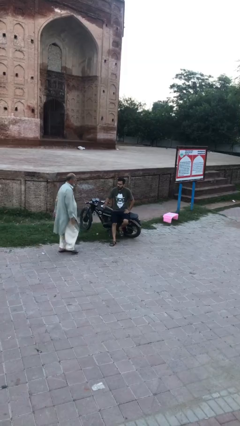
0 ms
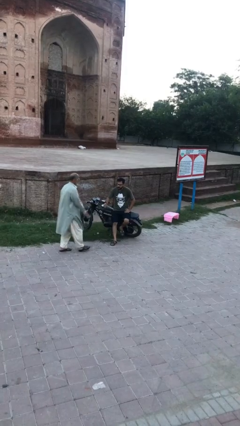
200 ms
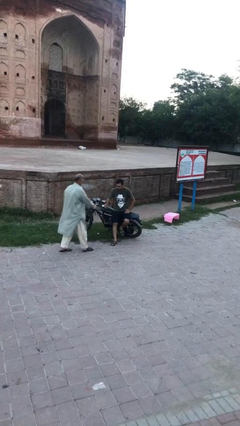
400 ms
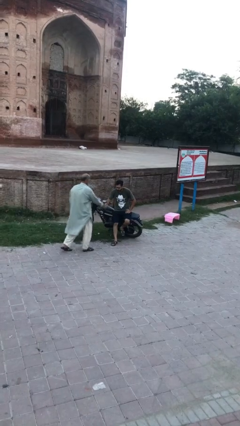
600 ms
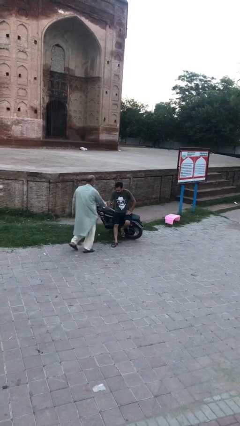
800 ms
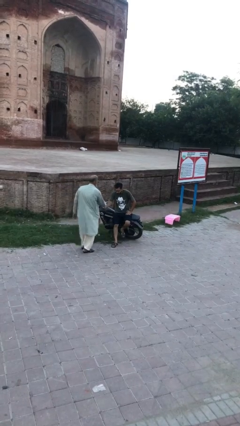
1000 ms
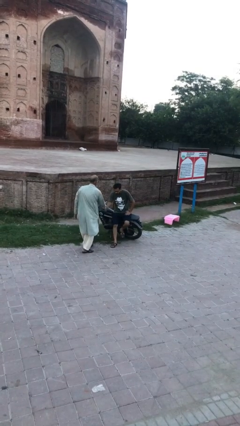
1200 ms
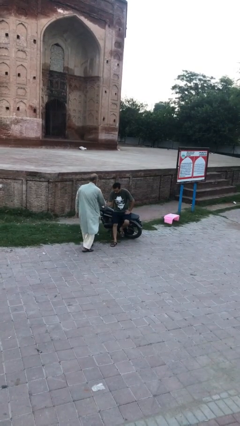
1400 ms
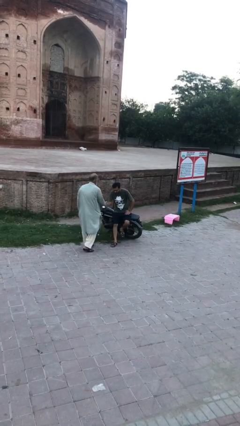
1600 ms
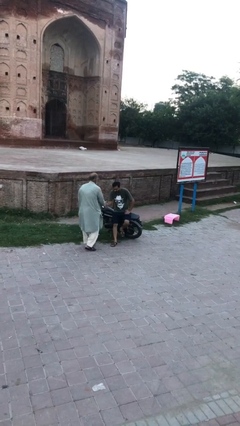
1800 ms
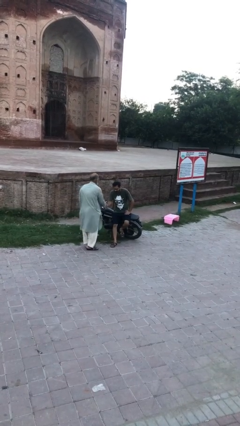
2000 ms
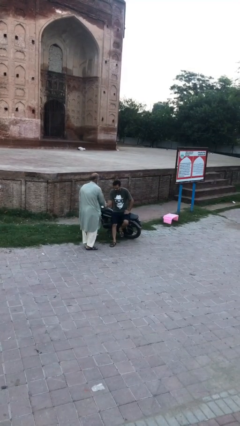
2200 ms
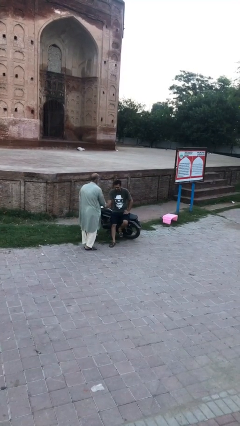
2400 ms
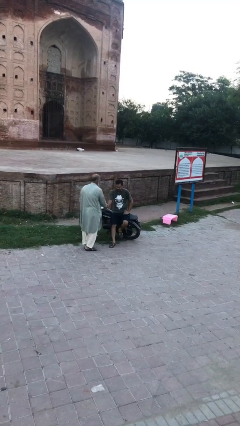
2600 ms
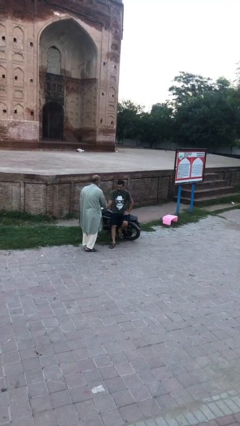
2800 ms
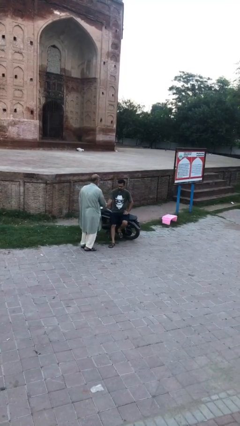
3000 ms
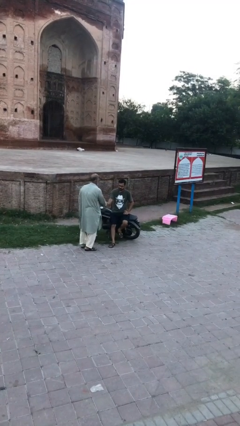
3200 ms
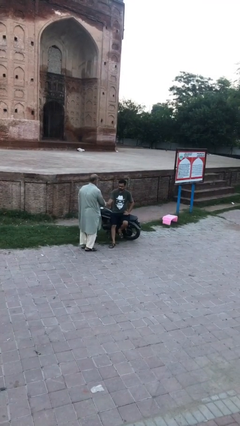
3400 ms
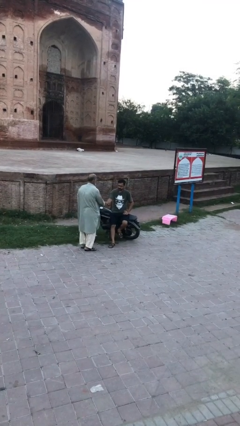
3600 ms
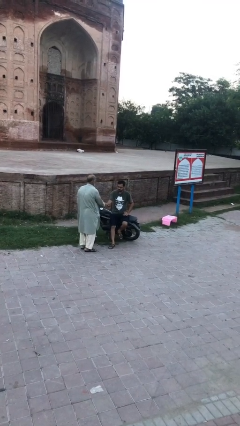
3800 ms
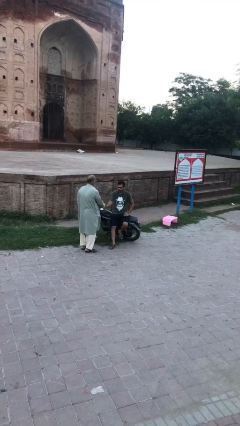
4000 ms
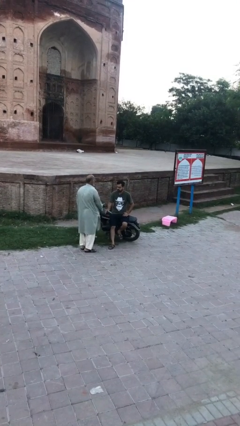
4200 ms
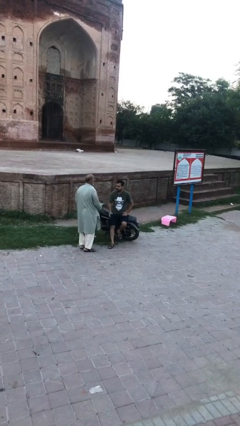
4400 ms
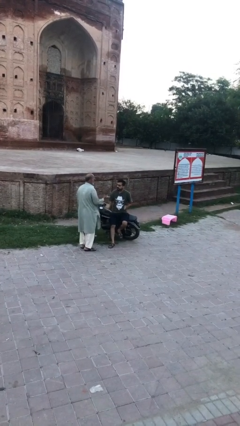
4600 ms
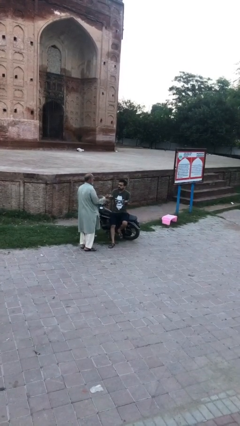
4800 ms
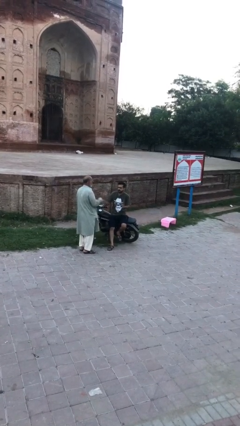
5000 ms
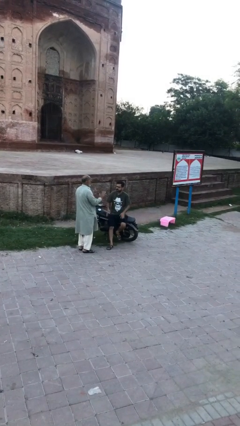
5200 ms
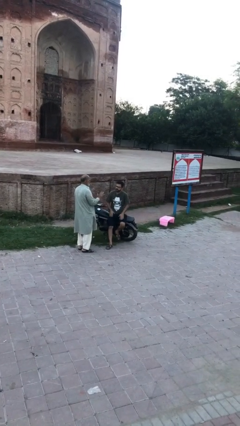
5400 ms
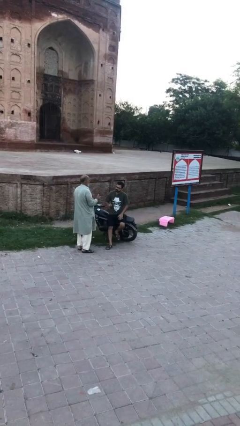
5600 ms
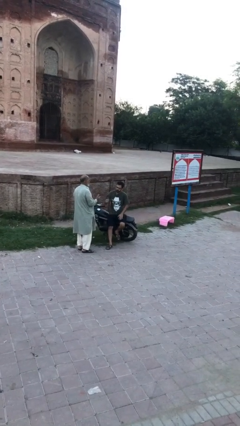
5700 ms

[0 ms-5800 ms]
person shakes hand

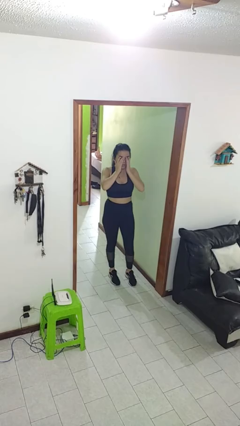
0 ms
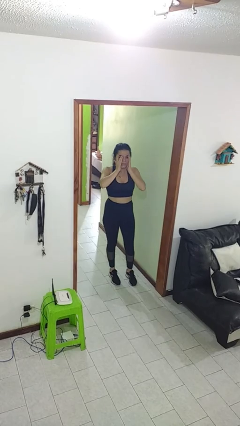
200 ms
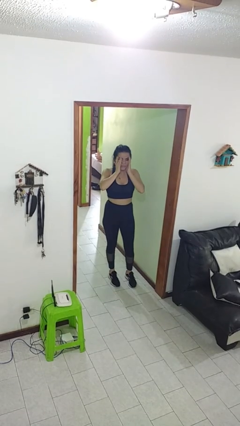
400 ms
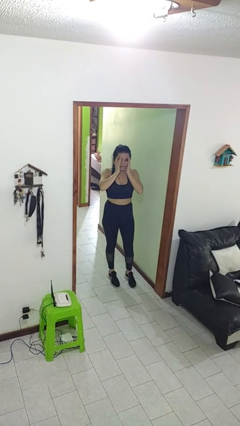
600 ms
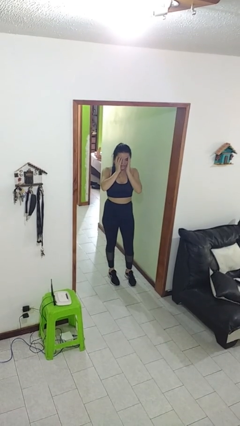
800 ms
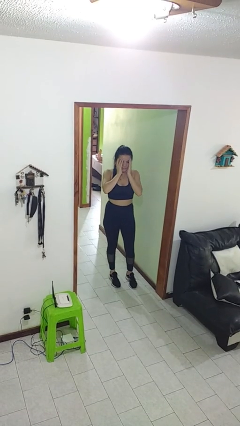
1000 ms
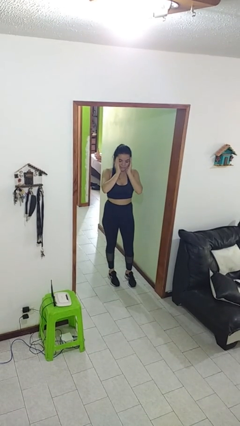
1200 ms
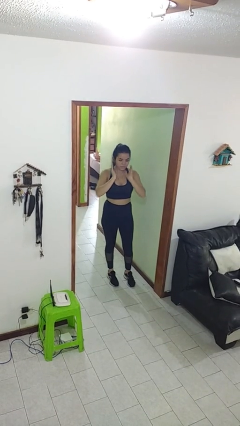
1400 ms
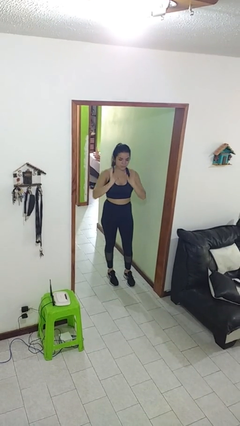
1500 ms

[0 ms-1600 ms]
person covers face with hands

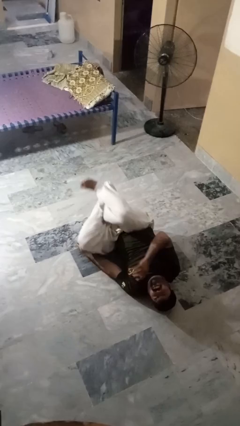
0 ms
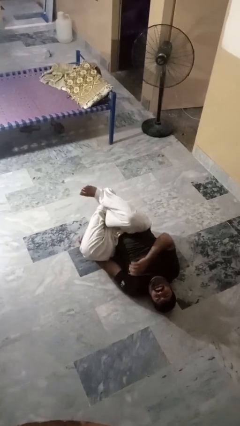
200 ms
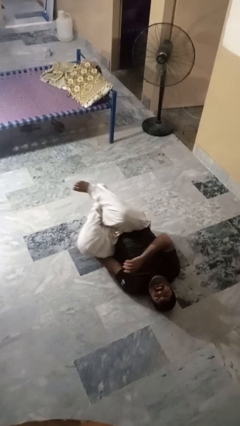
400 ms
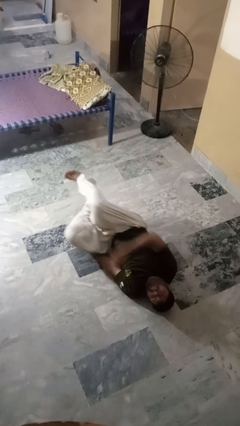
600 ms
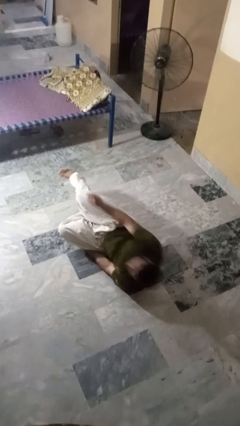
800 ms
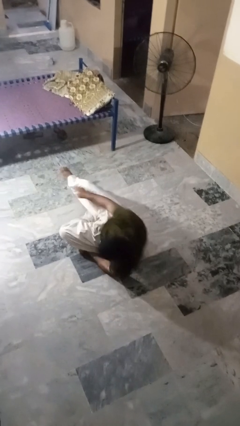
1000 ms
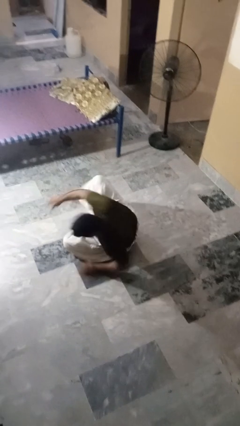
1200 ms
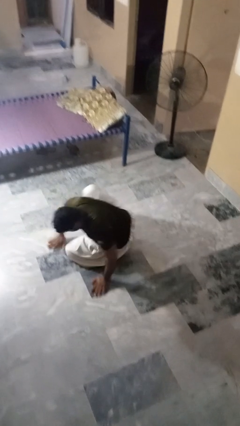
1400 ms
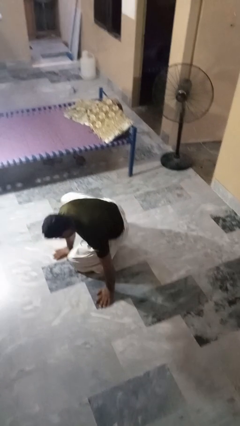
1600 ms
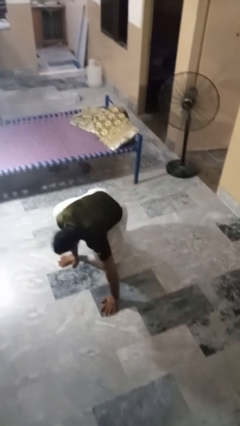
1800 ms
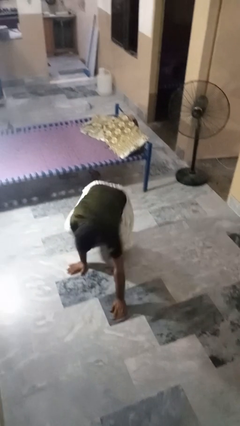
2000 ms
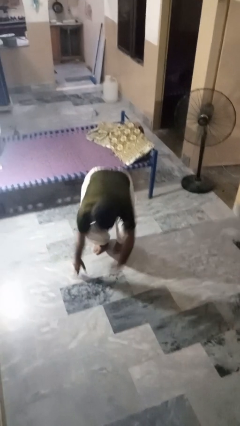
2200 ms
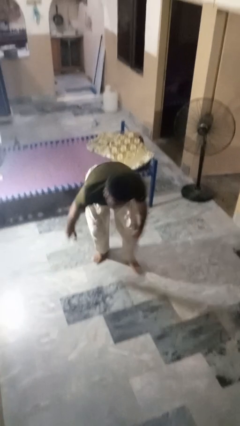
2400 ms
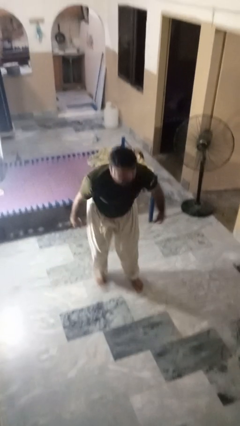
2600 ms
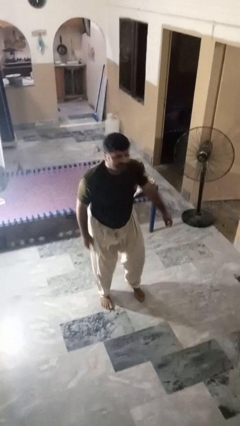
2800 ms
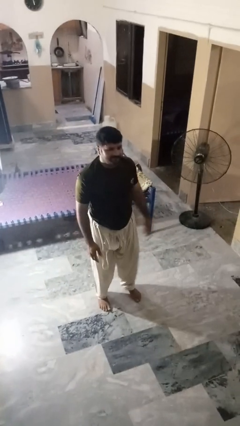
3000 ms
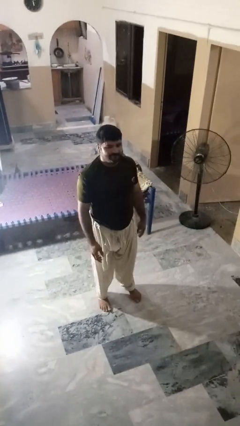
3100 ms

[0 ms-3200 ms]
person stands up from floor

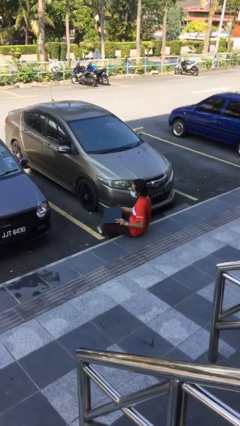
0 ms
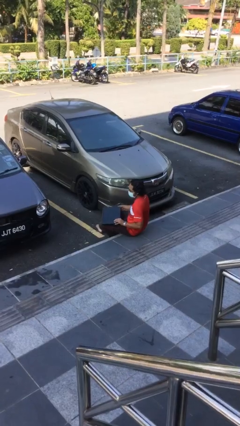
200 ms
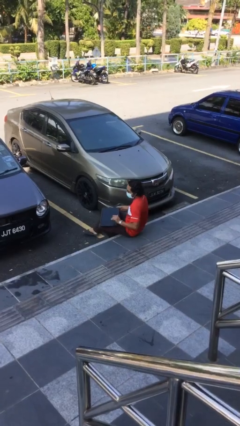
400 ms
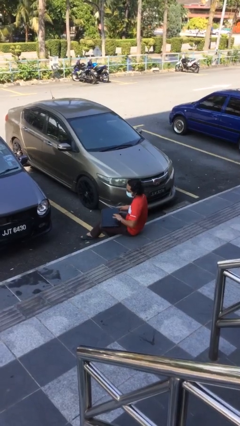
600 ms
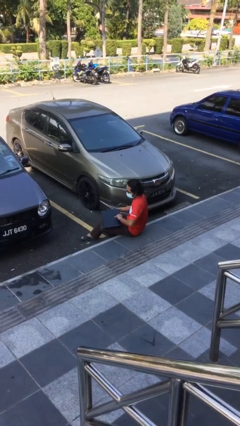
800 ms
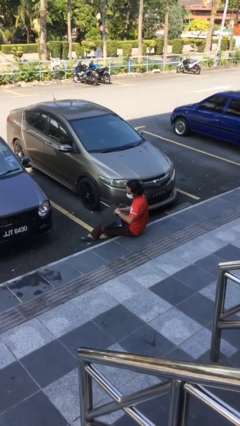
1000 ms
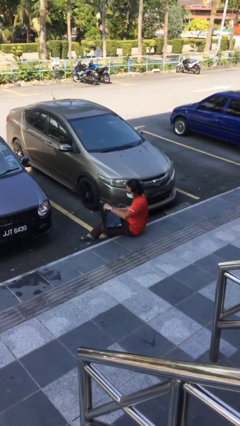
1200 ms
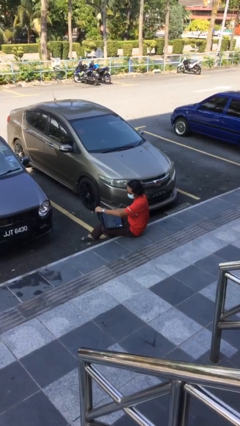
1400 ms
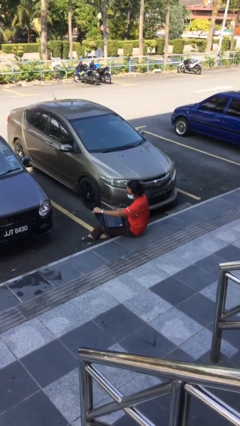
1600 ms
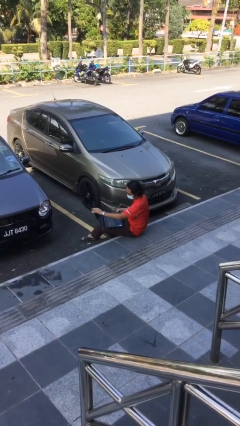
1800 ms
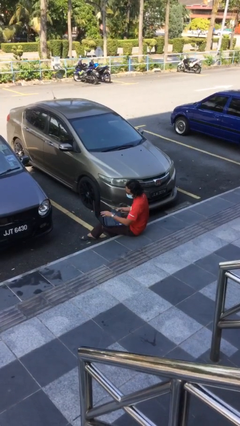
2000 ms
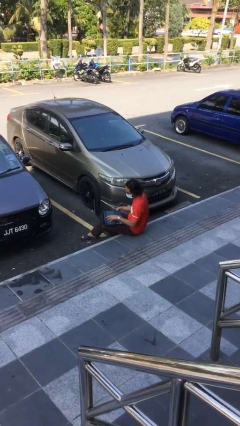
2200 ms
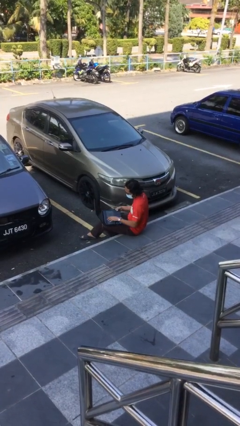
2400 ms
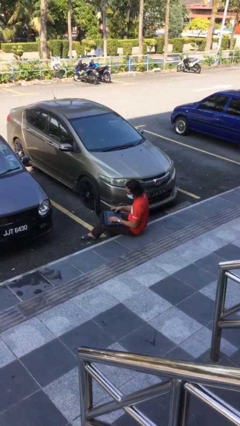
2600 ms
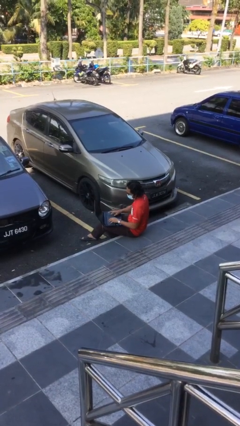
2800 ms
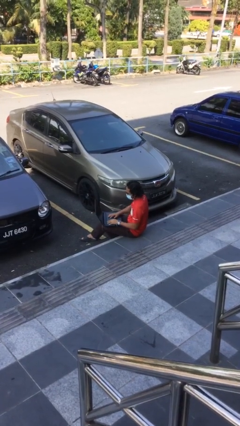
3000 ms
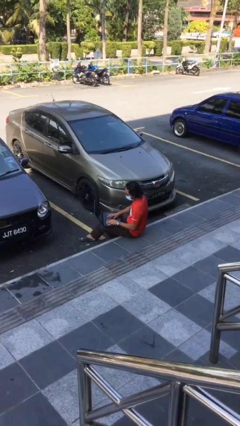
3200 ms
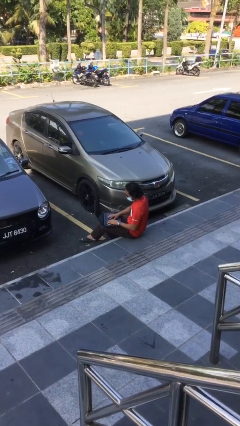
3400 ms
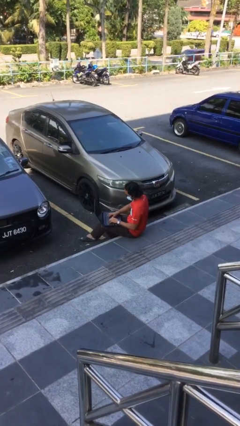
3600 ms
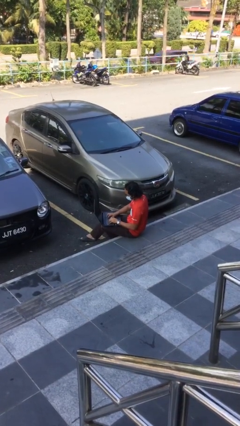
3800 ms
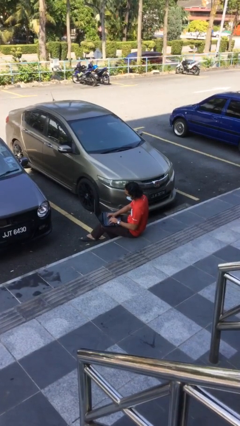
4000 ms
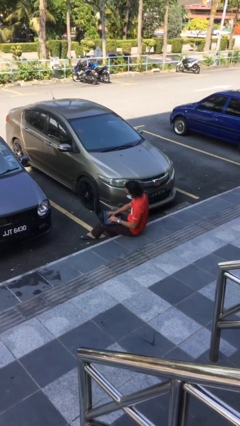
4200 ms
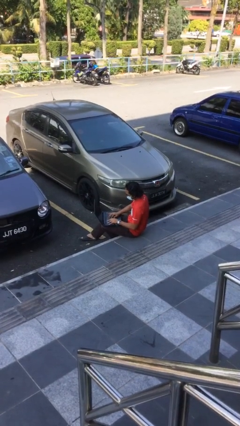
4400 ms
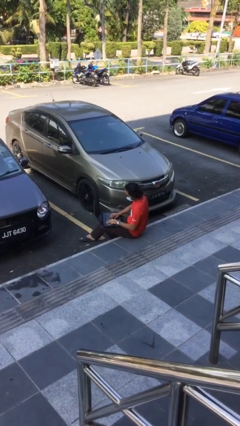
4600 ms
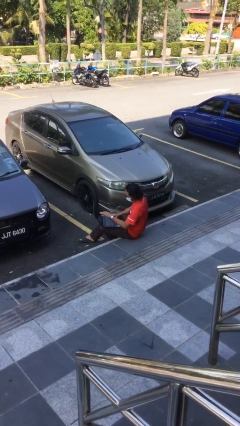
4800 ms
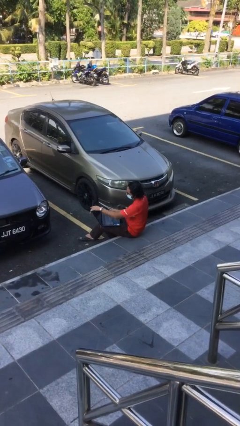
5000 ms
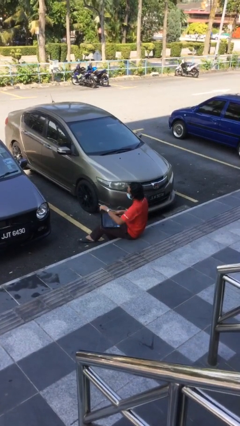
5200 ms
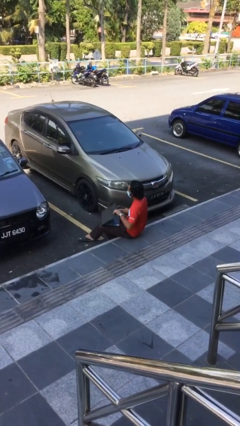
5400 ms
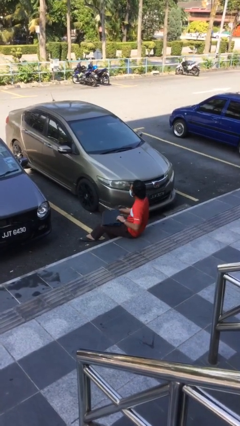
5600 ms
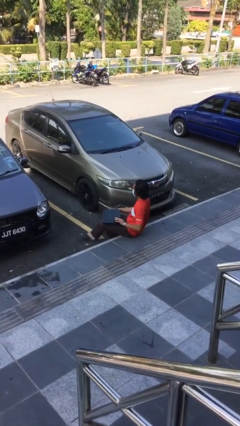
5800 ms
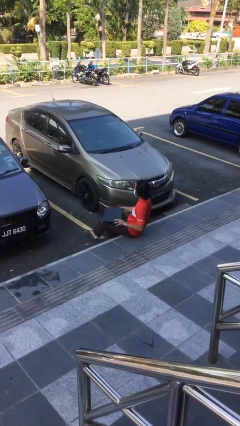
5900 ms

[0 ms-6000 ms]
person interacts with laptop

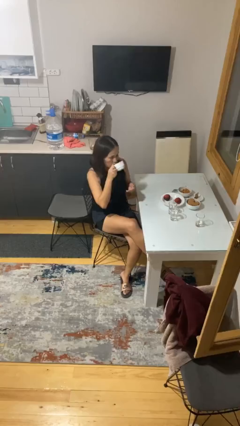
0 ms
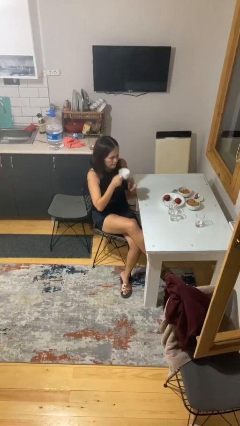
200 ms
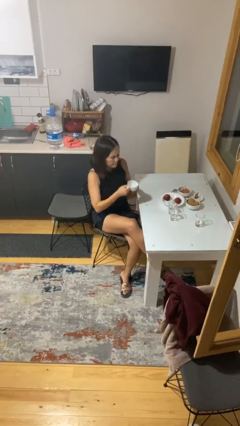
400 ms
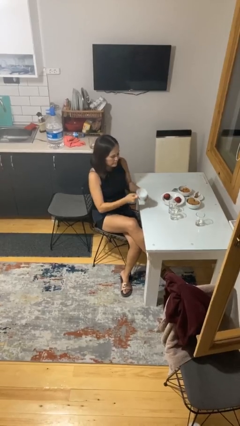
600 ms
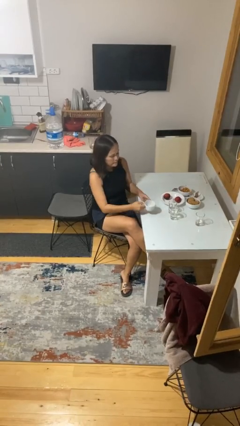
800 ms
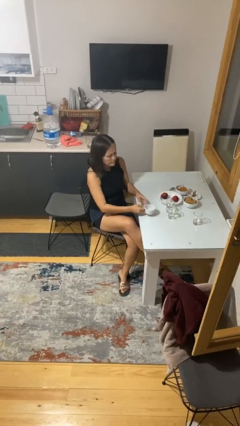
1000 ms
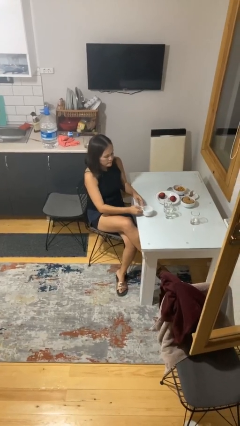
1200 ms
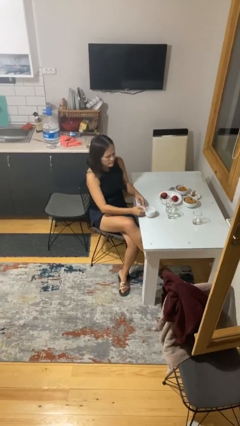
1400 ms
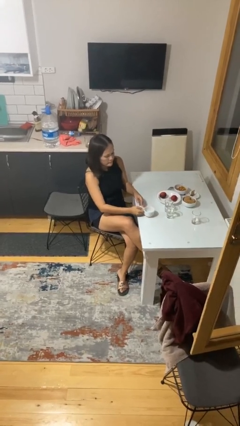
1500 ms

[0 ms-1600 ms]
person puts down object on table
